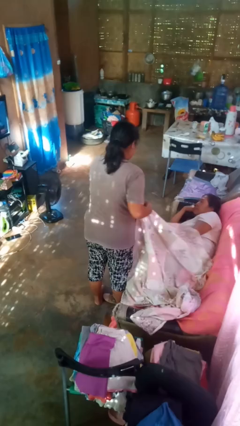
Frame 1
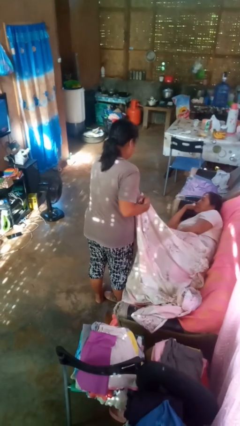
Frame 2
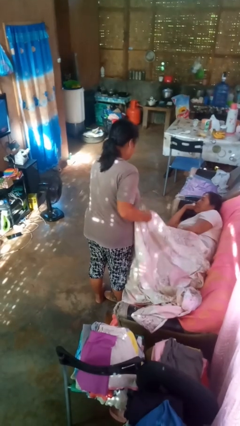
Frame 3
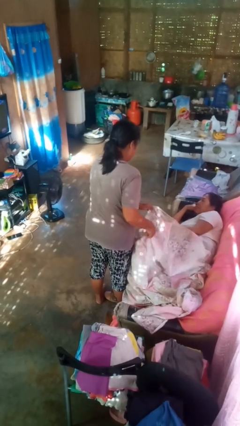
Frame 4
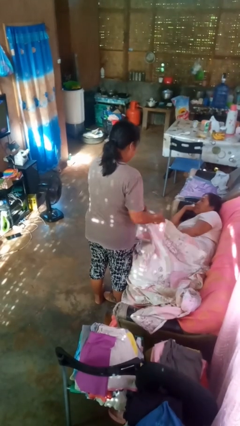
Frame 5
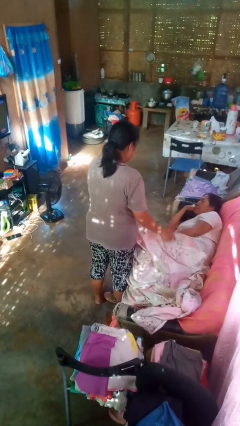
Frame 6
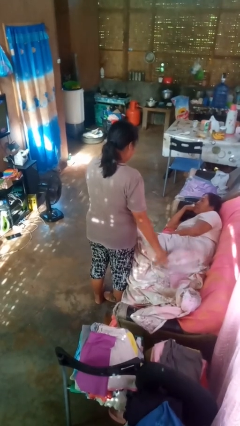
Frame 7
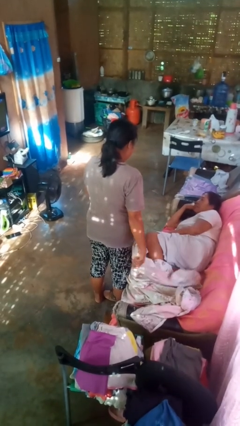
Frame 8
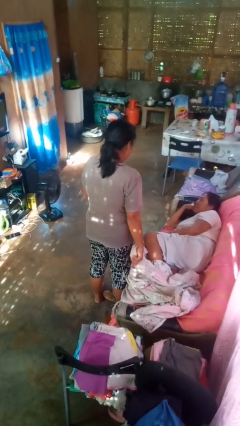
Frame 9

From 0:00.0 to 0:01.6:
person uncovers friend with blanket

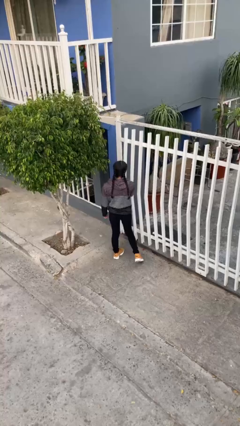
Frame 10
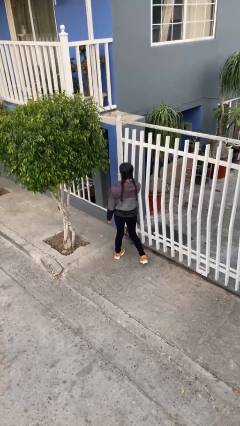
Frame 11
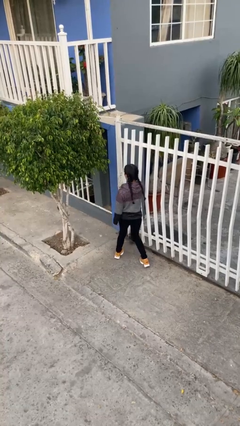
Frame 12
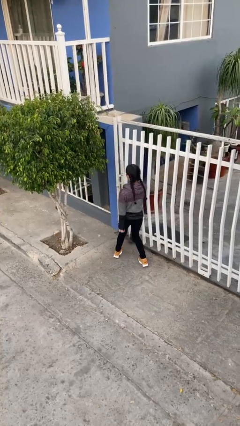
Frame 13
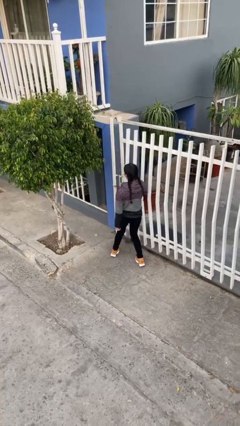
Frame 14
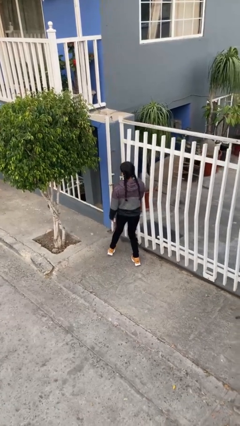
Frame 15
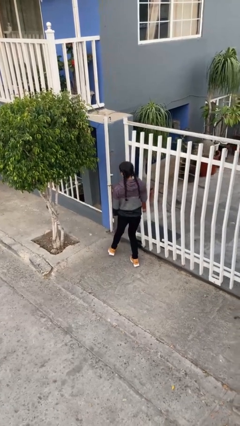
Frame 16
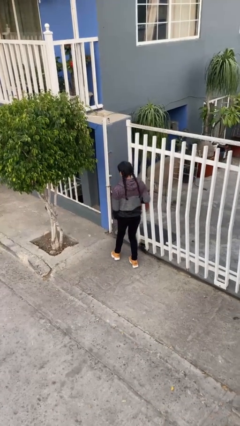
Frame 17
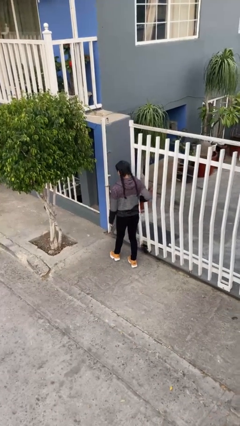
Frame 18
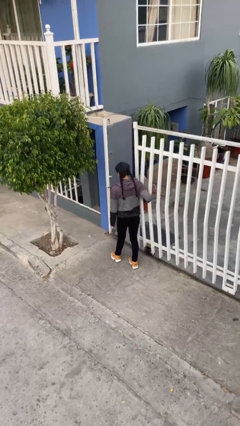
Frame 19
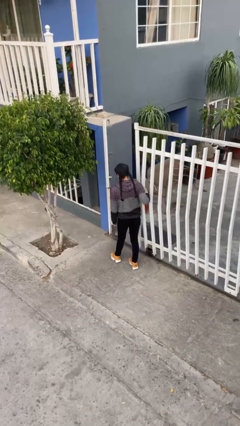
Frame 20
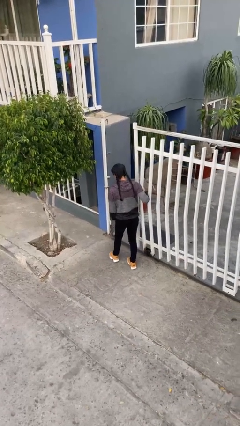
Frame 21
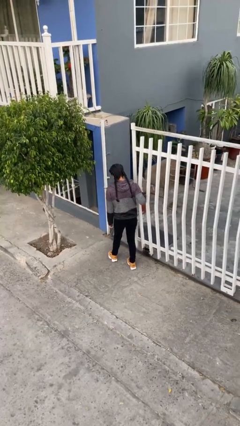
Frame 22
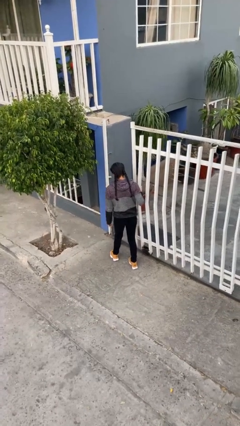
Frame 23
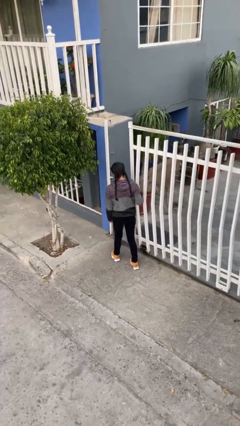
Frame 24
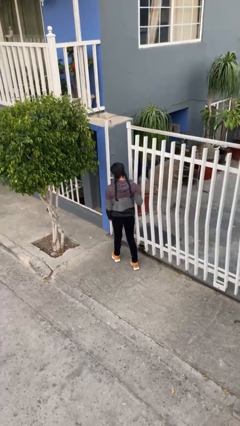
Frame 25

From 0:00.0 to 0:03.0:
person opens facility door

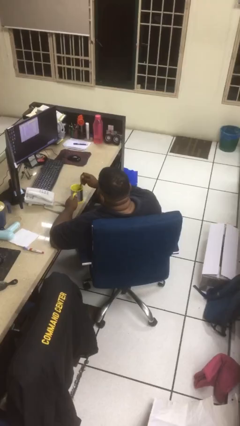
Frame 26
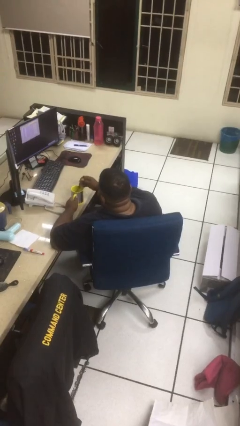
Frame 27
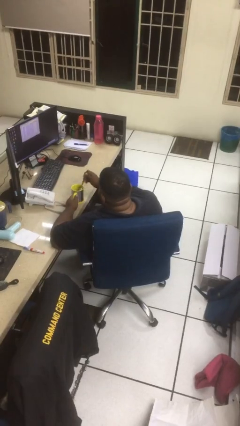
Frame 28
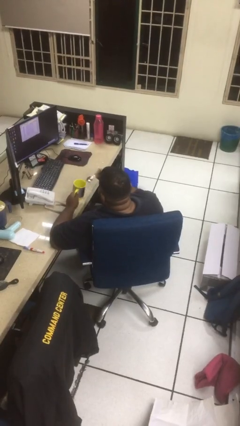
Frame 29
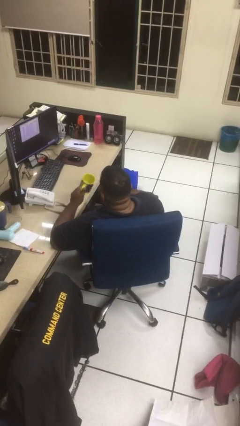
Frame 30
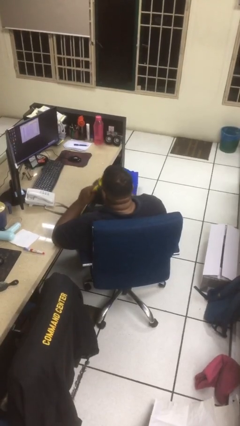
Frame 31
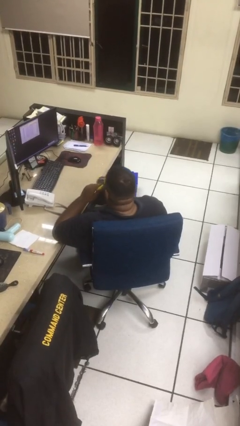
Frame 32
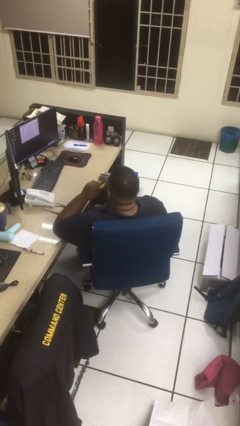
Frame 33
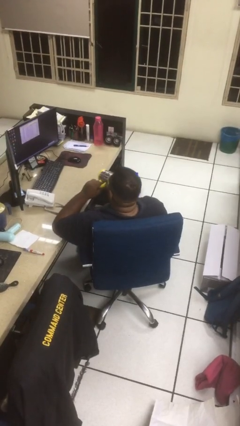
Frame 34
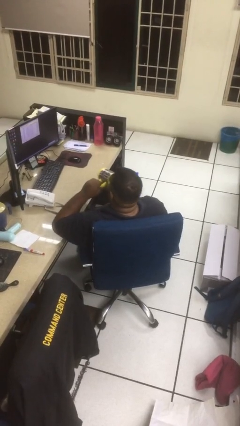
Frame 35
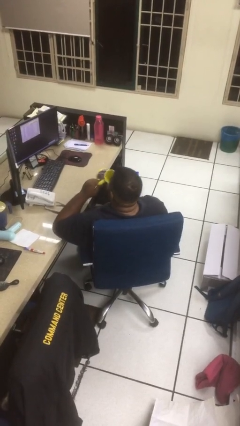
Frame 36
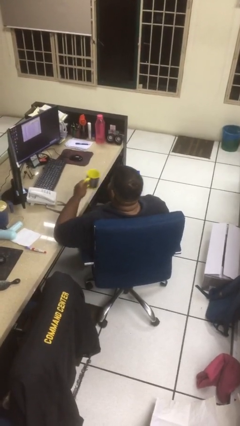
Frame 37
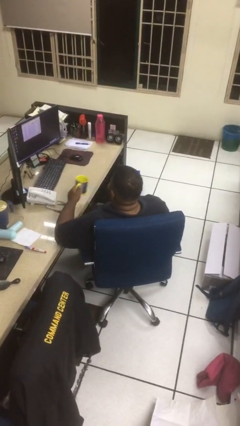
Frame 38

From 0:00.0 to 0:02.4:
person drinks from mug

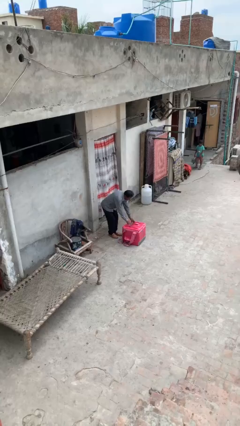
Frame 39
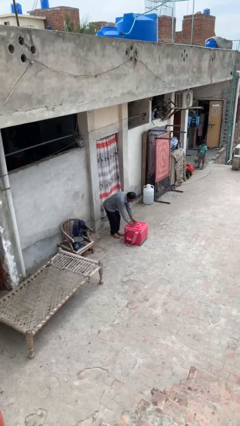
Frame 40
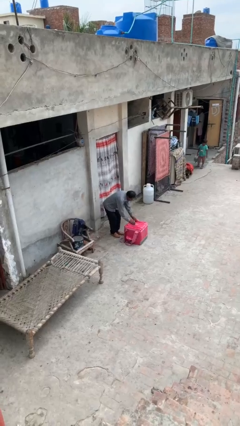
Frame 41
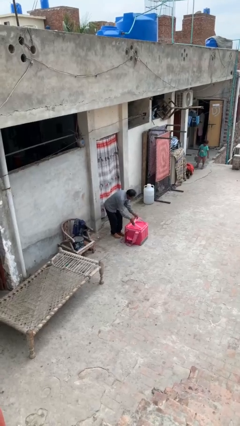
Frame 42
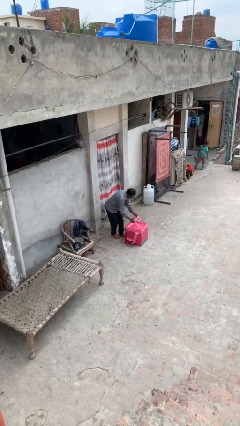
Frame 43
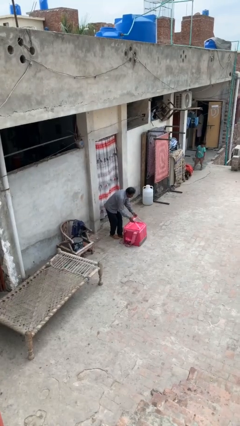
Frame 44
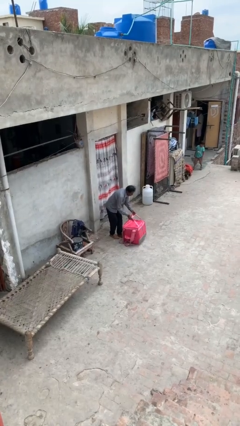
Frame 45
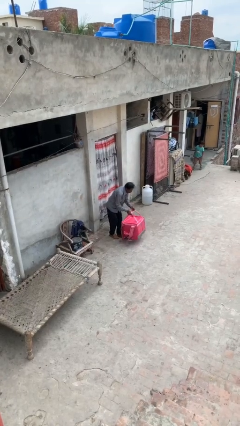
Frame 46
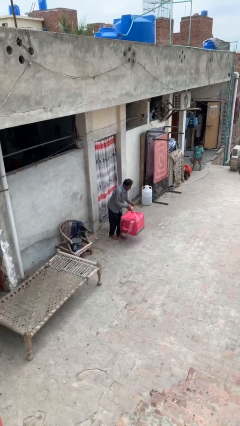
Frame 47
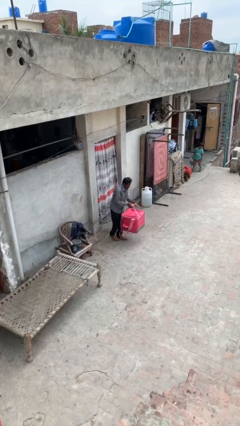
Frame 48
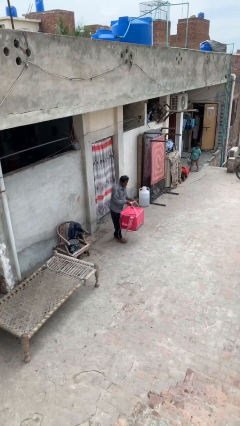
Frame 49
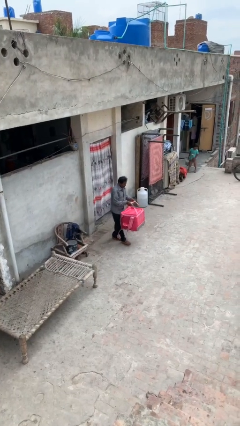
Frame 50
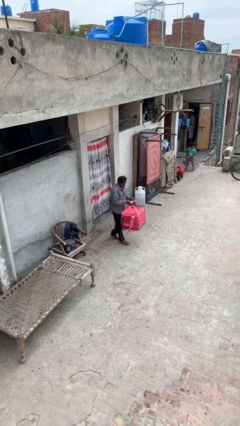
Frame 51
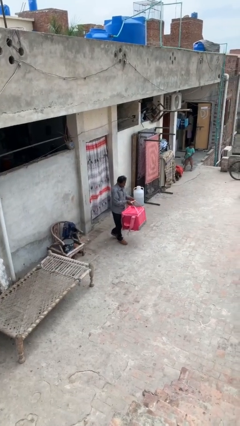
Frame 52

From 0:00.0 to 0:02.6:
person picks up object from floor

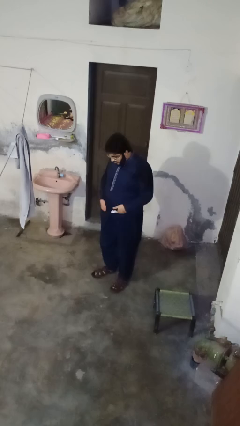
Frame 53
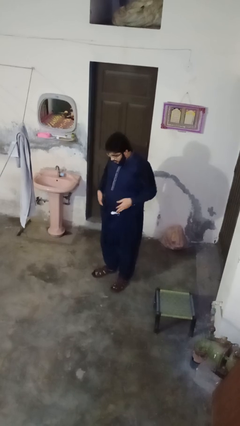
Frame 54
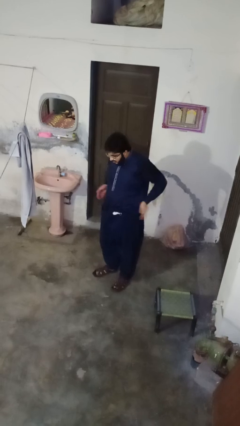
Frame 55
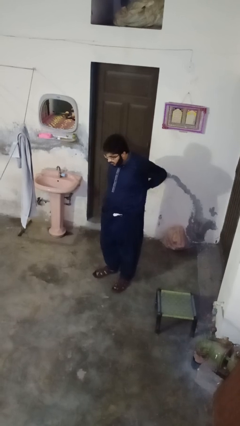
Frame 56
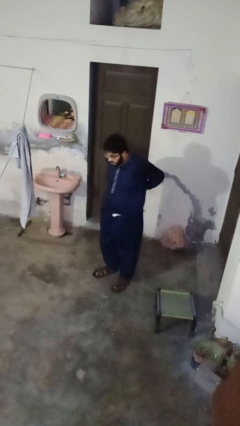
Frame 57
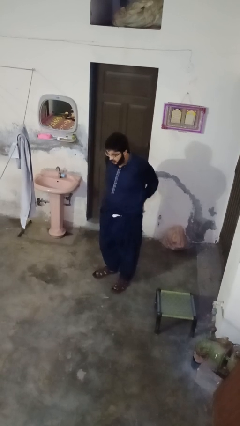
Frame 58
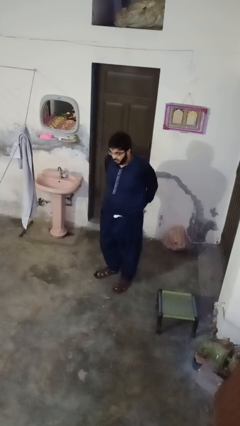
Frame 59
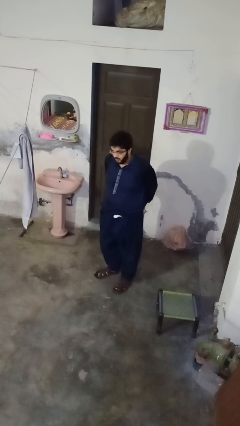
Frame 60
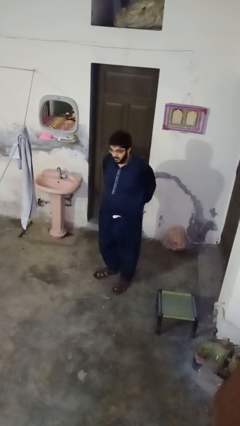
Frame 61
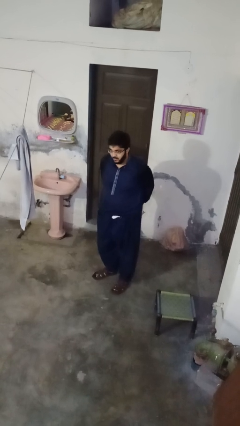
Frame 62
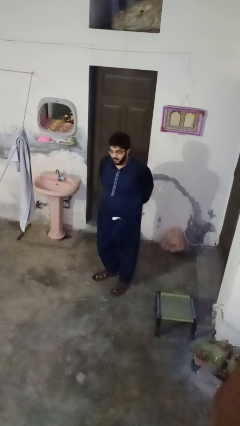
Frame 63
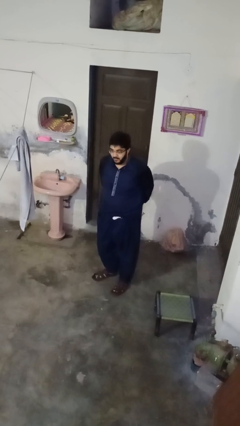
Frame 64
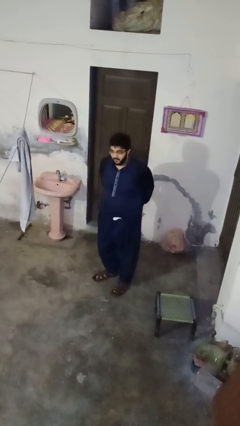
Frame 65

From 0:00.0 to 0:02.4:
person puts hands in back pockets

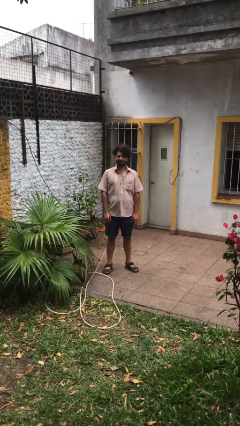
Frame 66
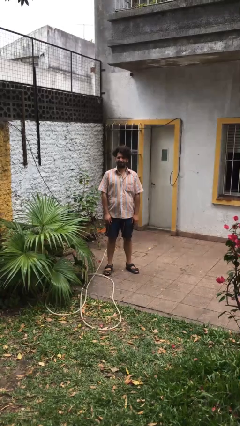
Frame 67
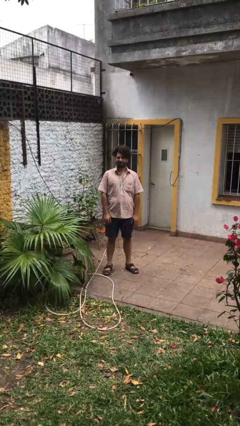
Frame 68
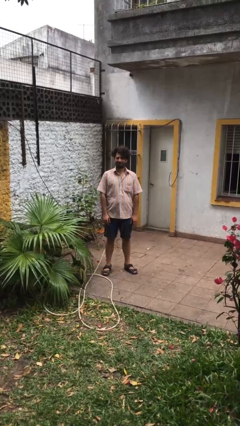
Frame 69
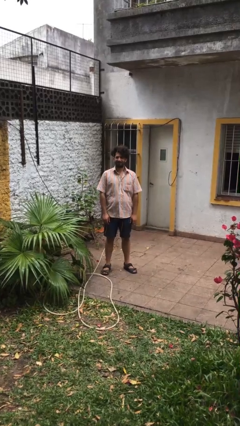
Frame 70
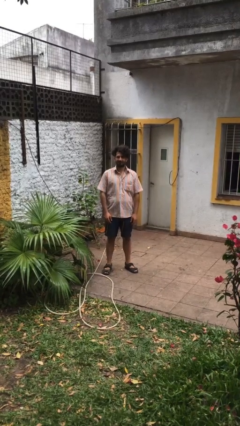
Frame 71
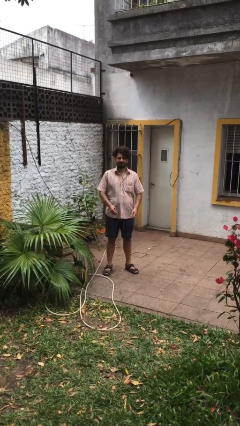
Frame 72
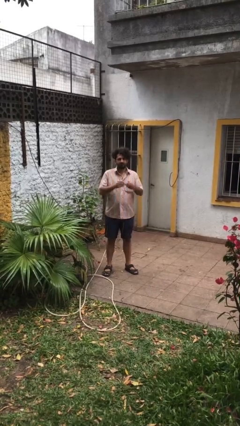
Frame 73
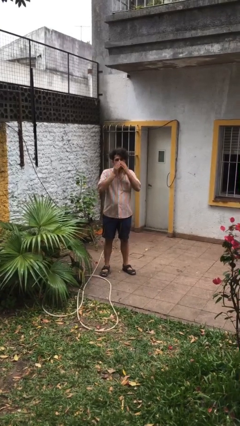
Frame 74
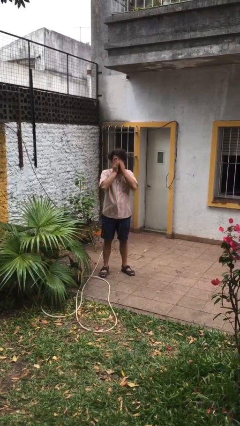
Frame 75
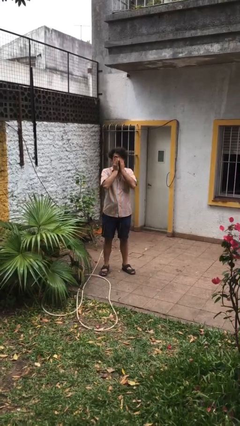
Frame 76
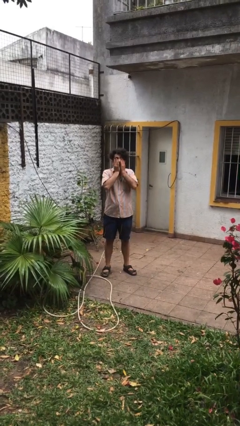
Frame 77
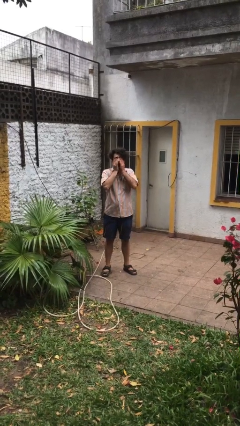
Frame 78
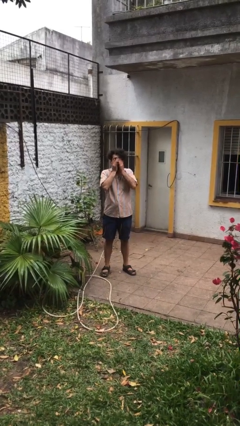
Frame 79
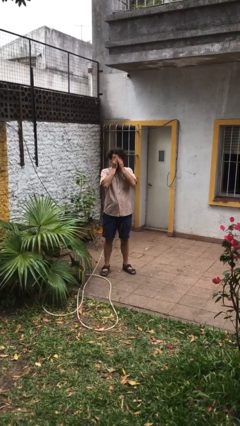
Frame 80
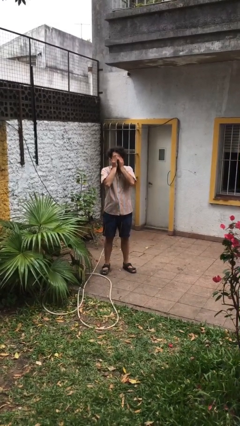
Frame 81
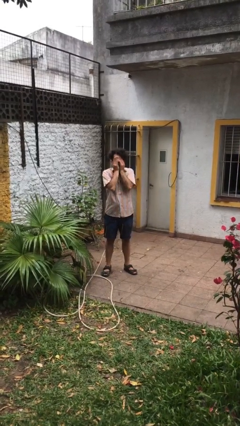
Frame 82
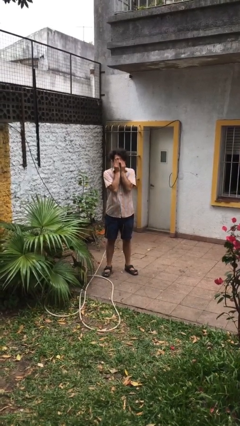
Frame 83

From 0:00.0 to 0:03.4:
person rubs eyes

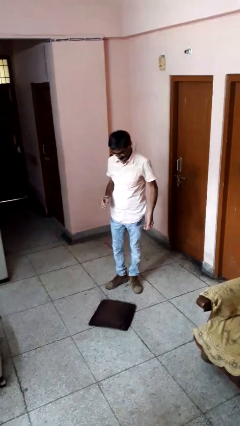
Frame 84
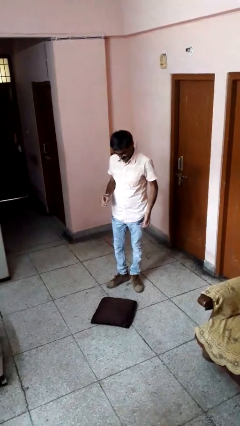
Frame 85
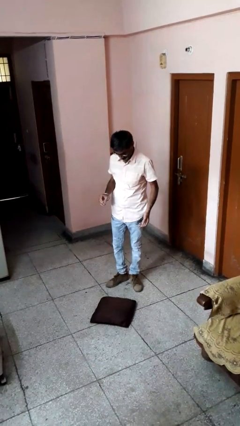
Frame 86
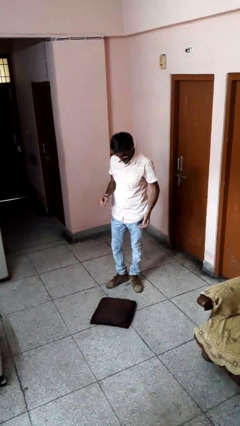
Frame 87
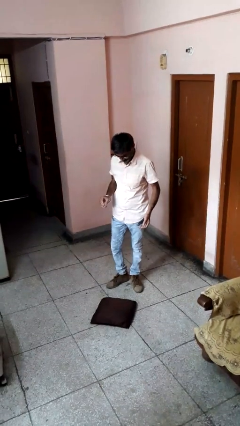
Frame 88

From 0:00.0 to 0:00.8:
person drops object

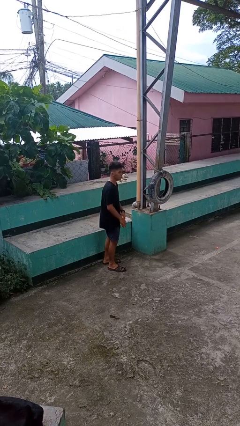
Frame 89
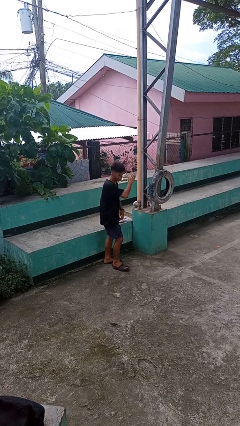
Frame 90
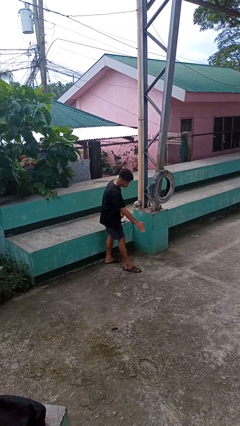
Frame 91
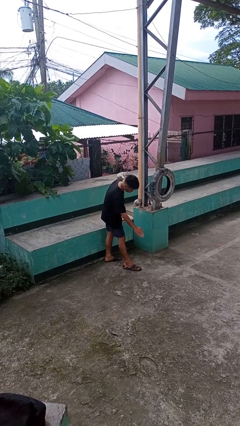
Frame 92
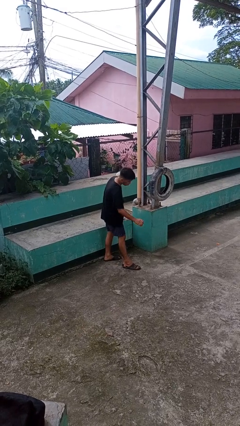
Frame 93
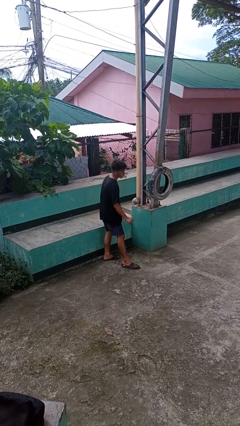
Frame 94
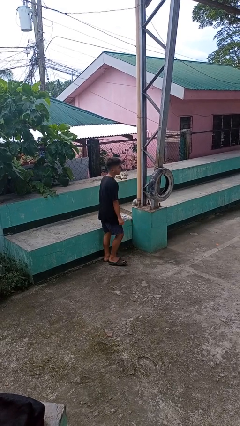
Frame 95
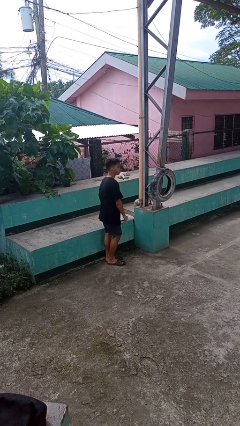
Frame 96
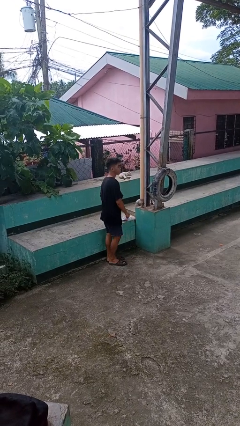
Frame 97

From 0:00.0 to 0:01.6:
person karate chop
